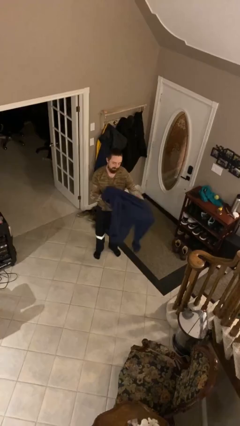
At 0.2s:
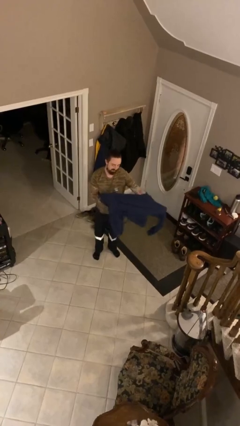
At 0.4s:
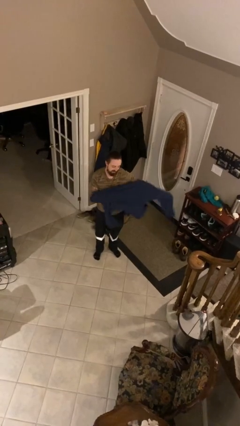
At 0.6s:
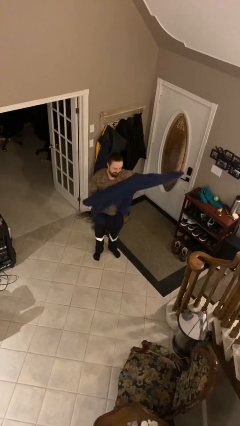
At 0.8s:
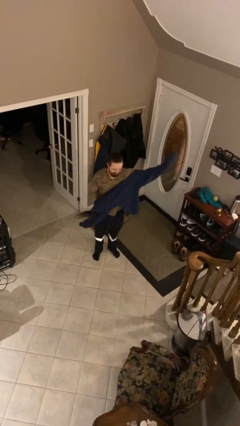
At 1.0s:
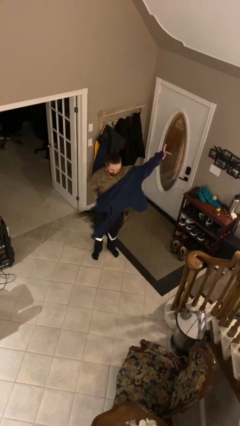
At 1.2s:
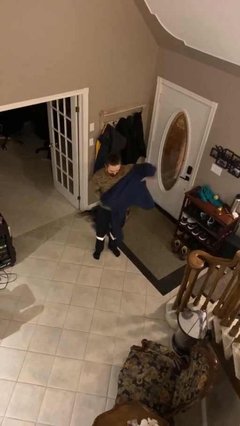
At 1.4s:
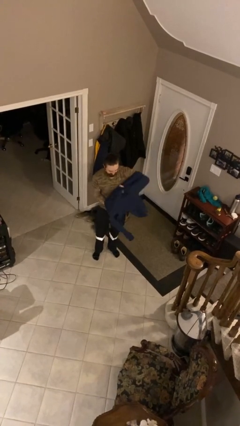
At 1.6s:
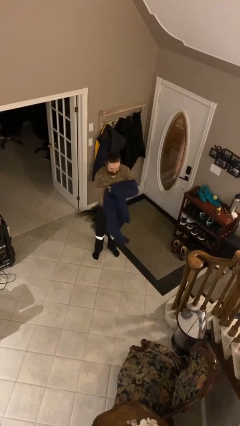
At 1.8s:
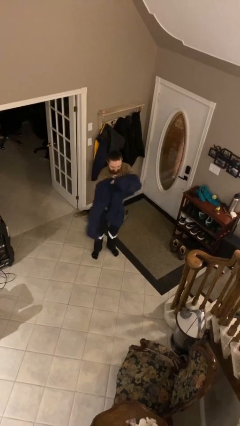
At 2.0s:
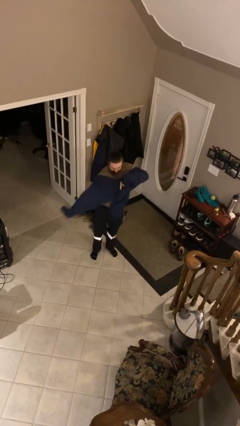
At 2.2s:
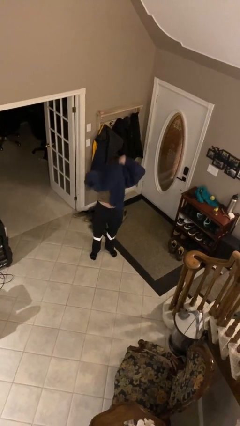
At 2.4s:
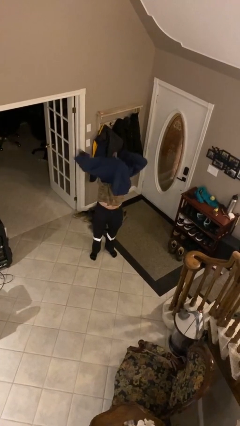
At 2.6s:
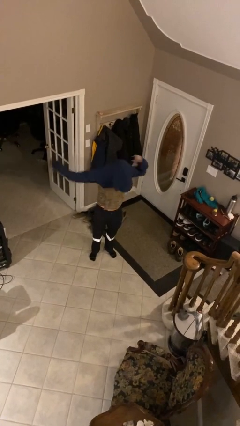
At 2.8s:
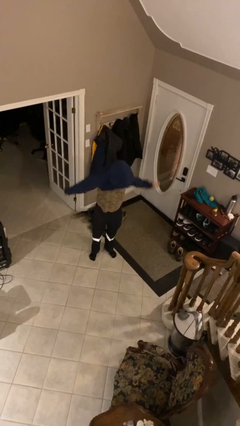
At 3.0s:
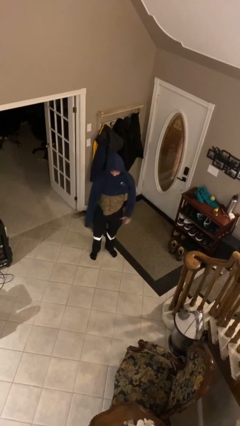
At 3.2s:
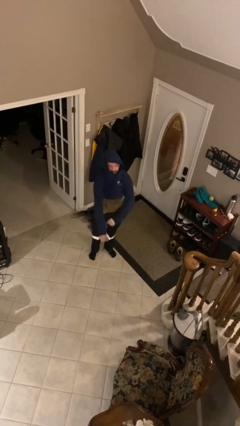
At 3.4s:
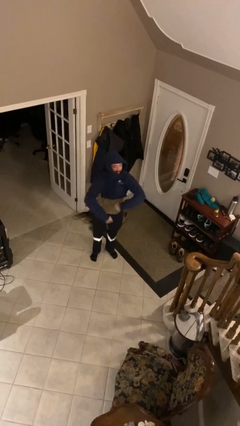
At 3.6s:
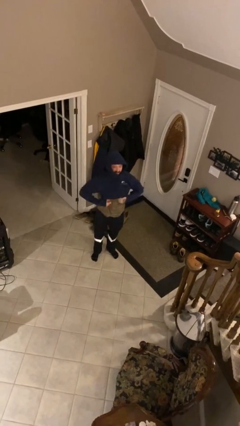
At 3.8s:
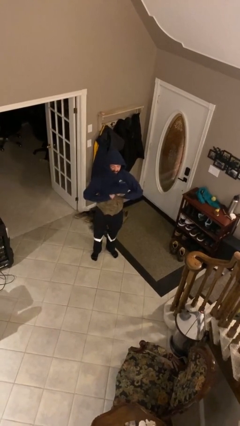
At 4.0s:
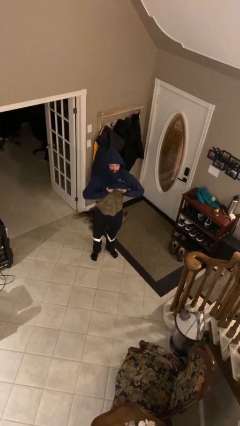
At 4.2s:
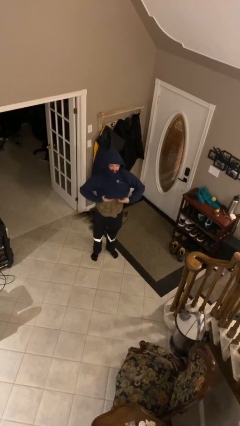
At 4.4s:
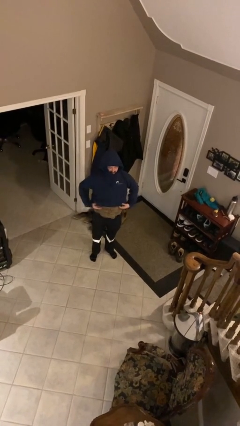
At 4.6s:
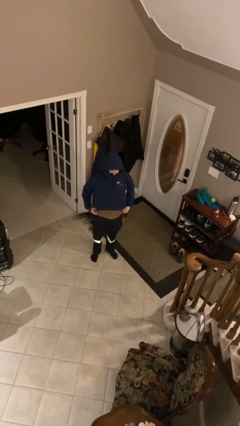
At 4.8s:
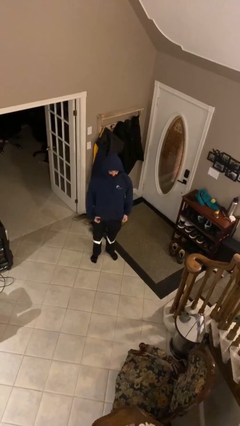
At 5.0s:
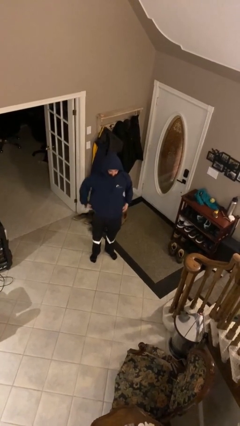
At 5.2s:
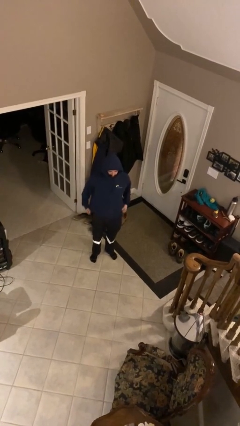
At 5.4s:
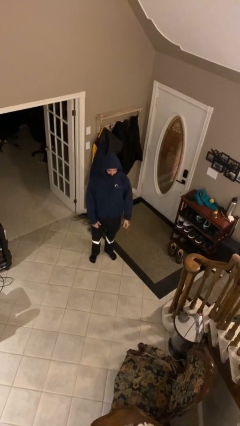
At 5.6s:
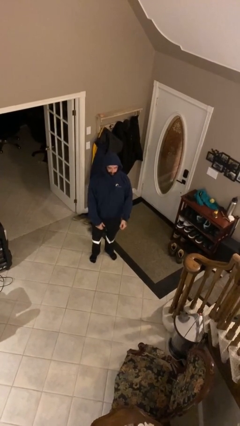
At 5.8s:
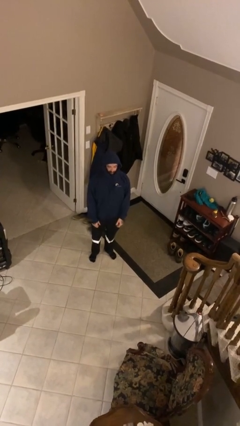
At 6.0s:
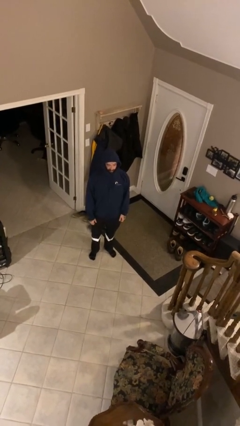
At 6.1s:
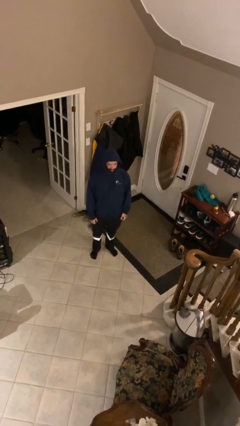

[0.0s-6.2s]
person puts on hoodie

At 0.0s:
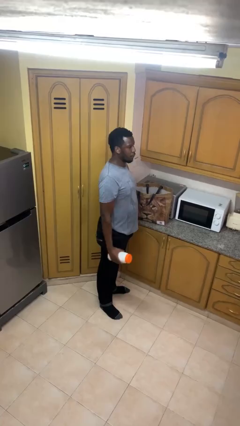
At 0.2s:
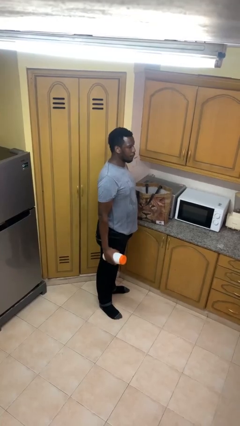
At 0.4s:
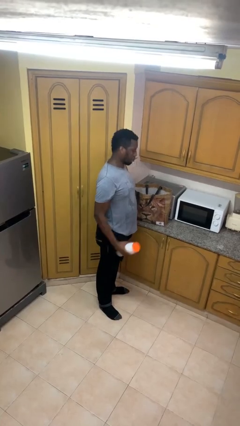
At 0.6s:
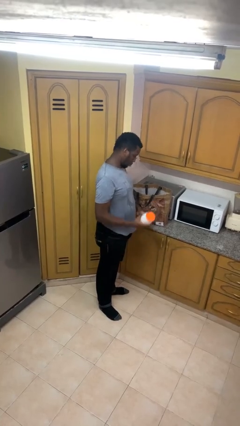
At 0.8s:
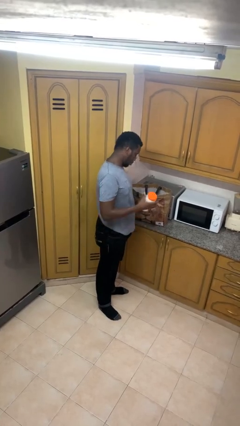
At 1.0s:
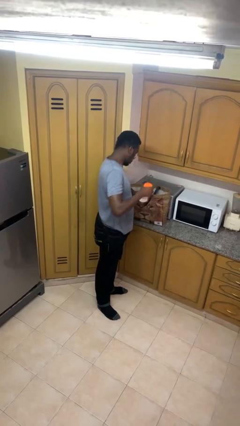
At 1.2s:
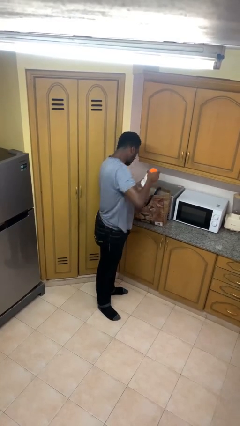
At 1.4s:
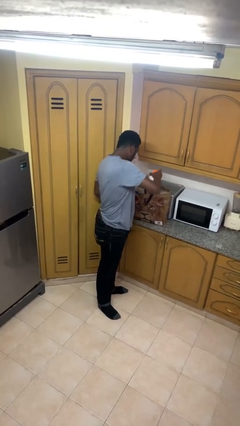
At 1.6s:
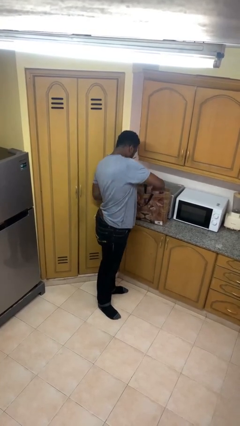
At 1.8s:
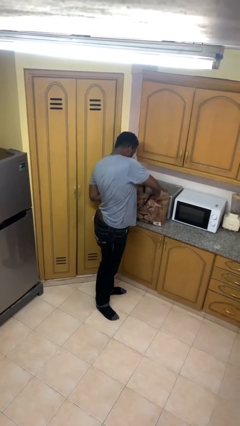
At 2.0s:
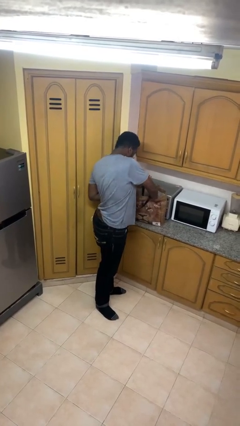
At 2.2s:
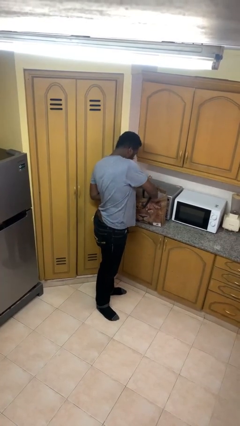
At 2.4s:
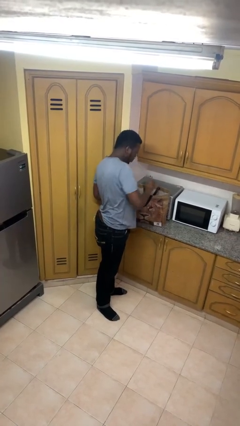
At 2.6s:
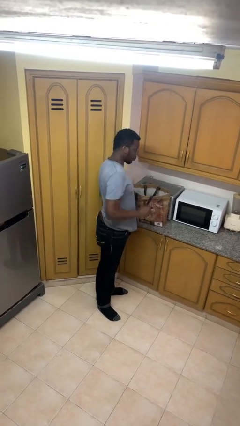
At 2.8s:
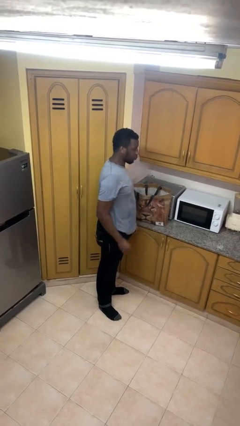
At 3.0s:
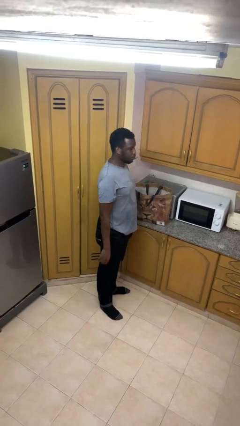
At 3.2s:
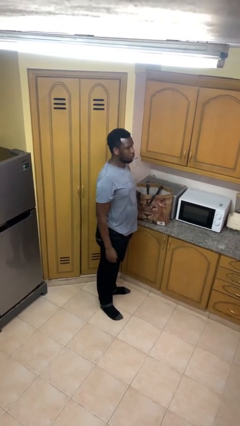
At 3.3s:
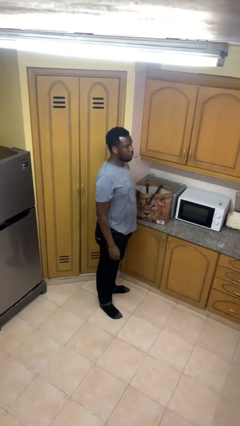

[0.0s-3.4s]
person puts object into bag

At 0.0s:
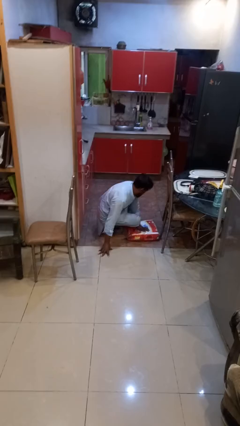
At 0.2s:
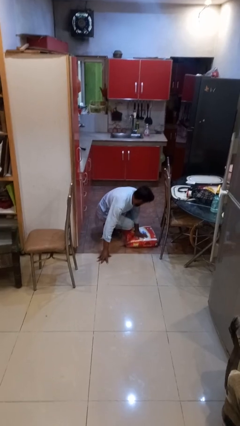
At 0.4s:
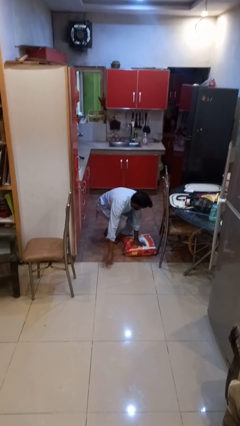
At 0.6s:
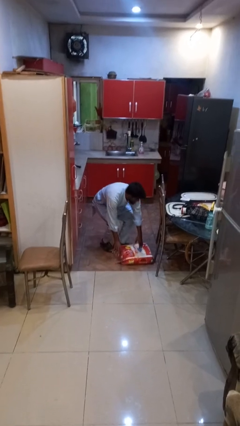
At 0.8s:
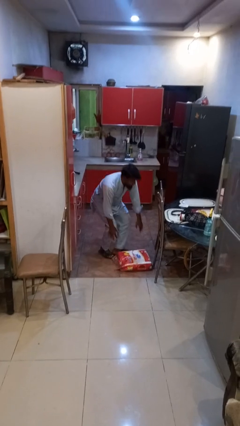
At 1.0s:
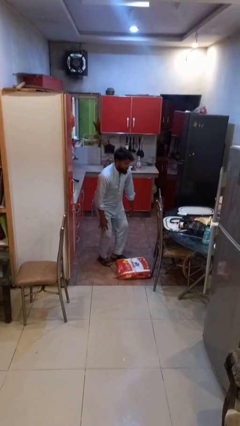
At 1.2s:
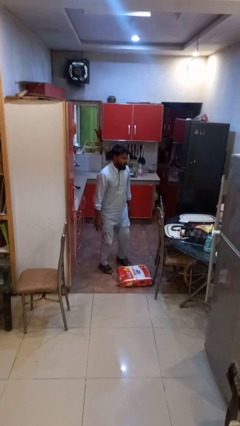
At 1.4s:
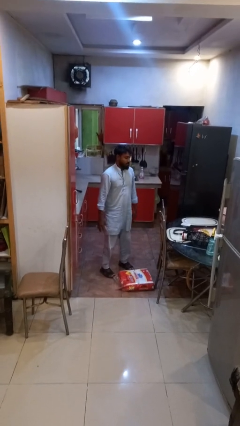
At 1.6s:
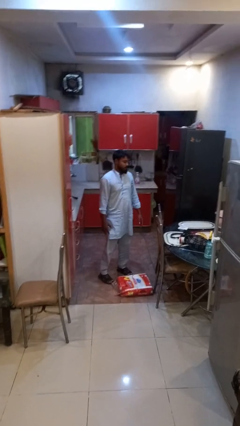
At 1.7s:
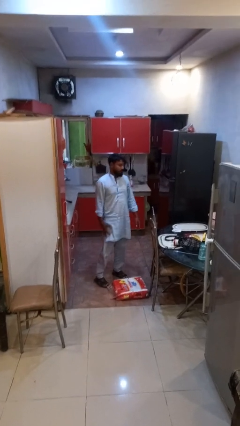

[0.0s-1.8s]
person stands up from floor

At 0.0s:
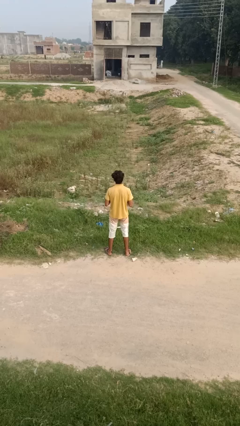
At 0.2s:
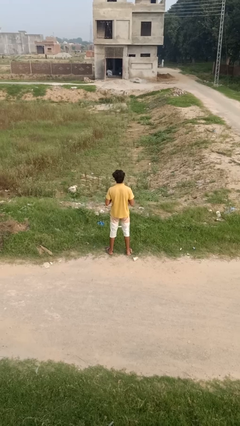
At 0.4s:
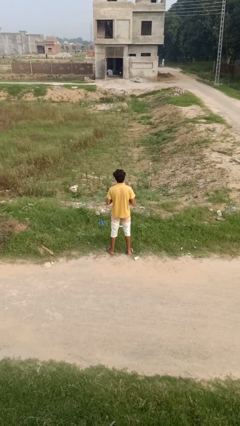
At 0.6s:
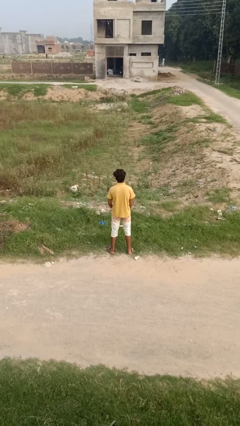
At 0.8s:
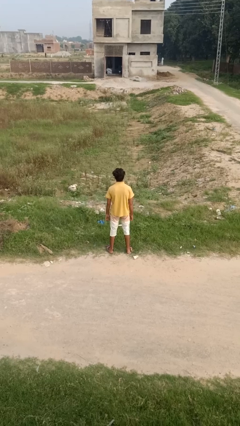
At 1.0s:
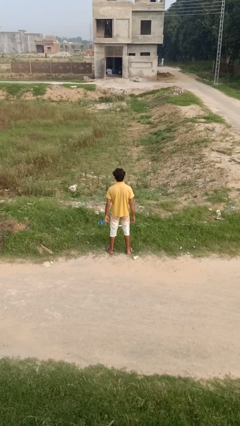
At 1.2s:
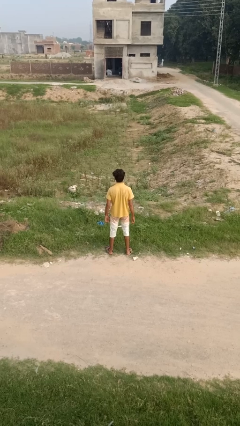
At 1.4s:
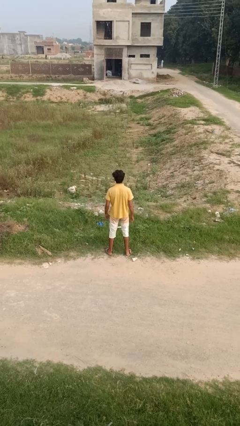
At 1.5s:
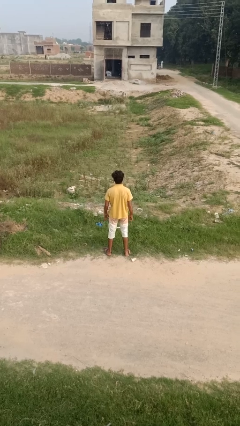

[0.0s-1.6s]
person buttons shirt

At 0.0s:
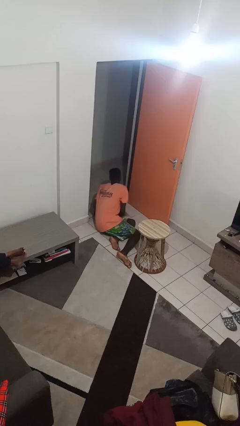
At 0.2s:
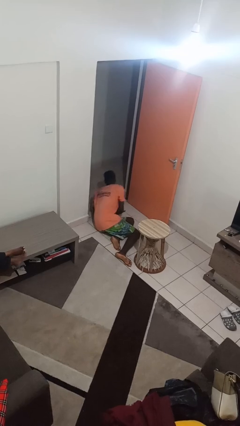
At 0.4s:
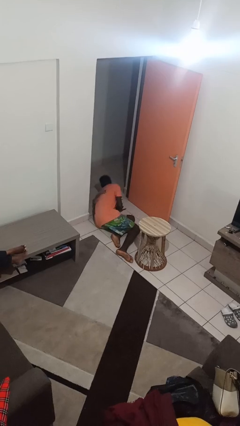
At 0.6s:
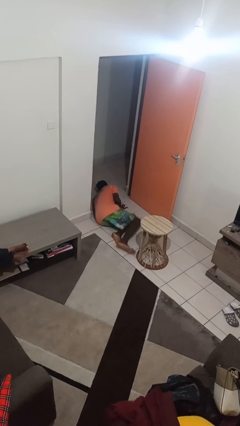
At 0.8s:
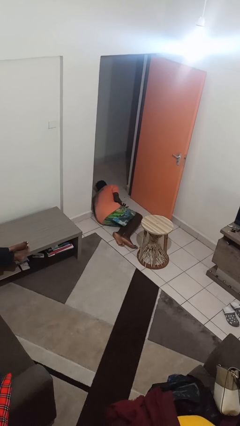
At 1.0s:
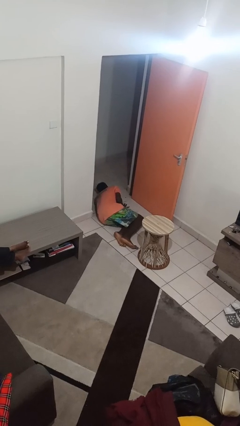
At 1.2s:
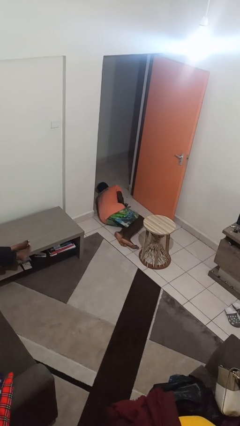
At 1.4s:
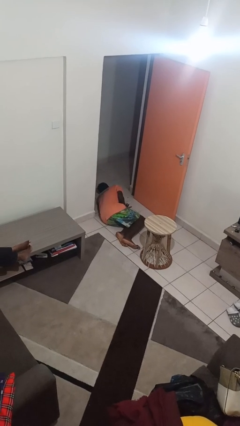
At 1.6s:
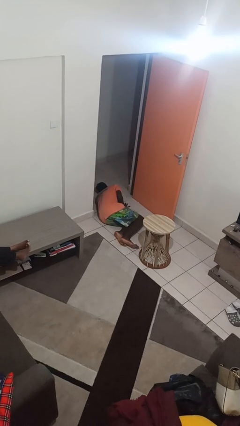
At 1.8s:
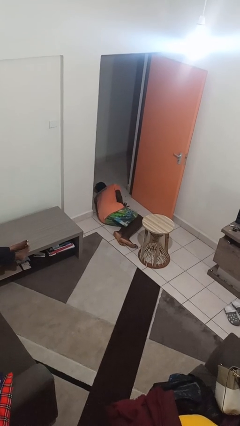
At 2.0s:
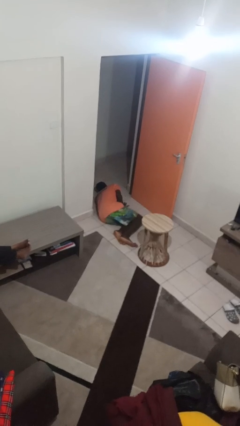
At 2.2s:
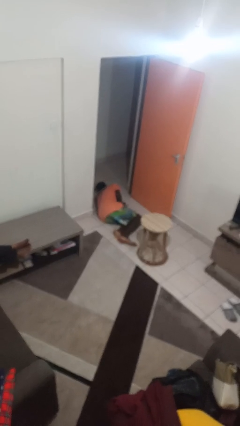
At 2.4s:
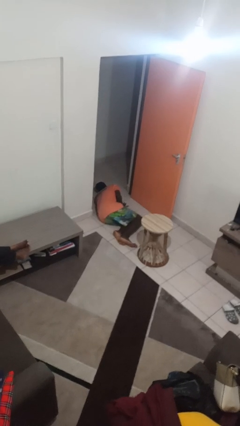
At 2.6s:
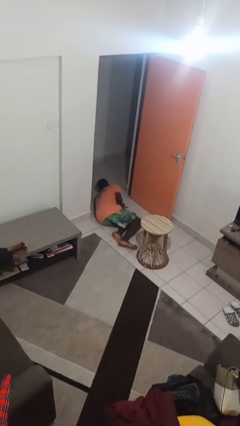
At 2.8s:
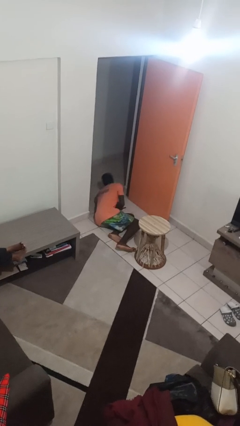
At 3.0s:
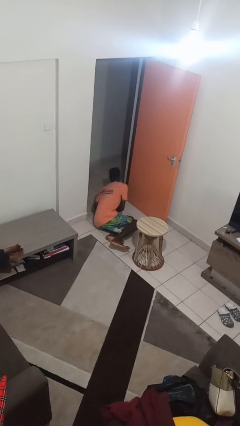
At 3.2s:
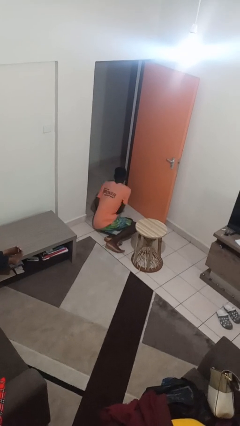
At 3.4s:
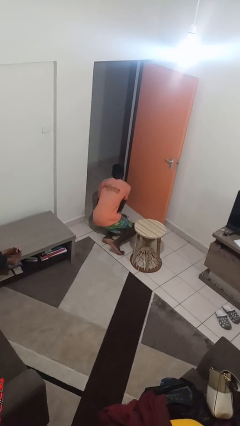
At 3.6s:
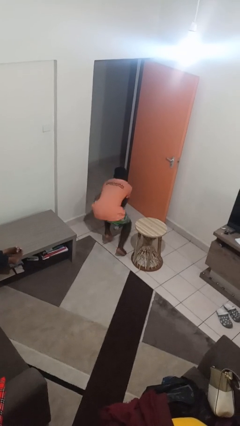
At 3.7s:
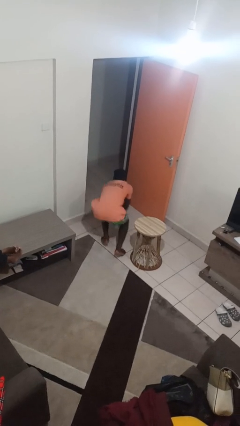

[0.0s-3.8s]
person lies down on floor

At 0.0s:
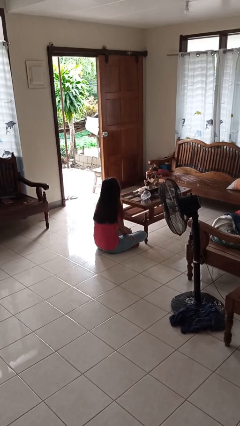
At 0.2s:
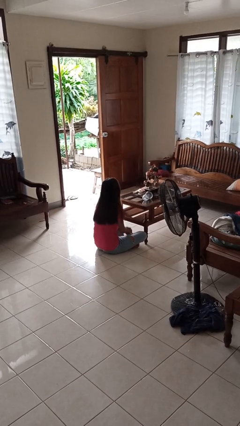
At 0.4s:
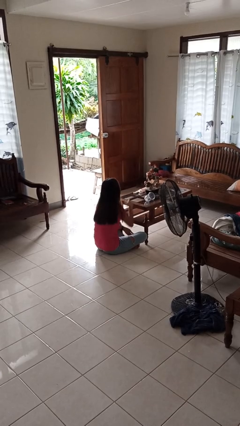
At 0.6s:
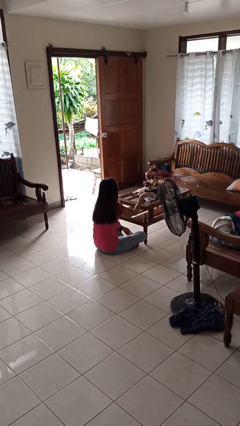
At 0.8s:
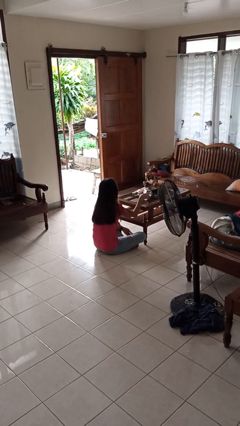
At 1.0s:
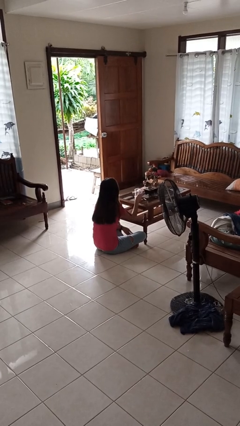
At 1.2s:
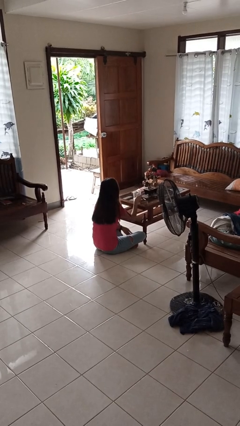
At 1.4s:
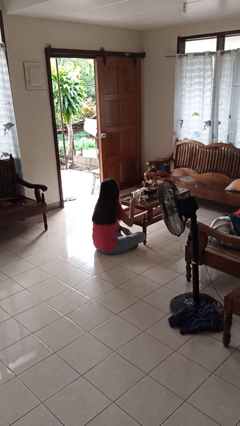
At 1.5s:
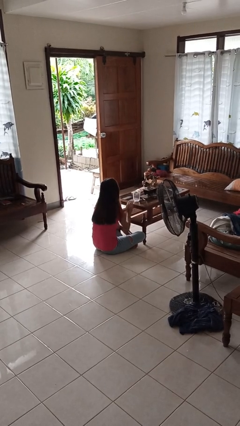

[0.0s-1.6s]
person sets upright glass
